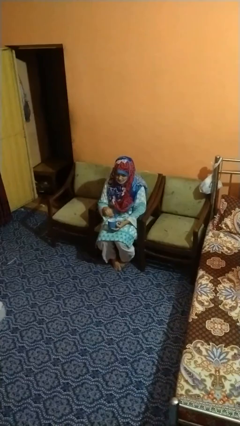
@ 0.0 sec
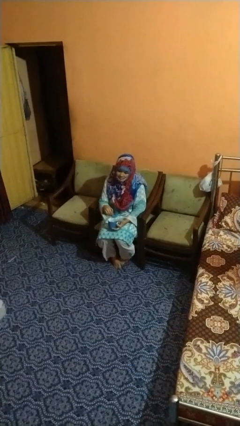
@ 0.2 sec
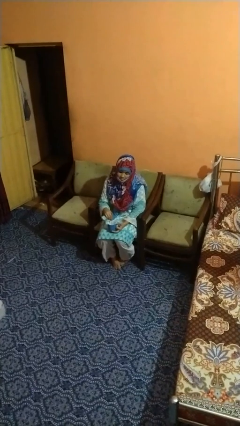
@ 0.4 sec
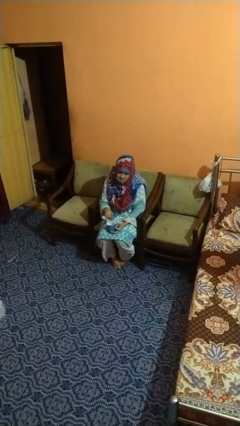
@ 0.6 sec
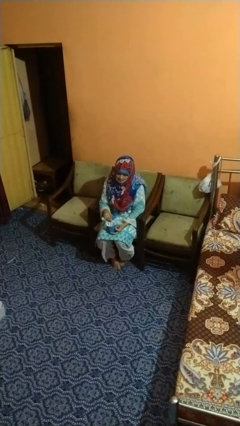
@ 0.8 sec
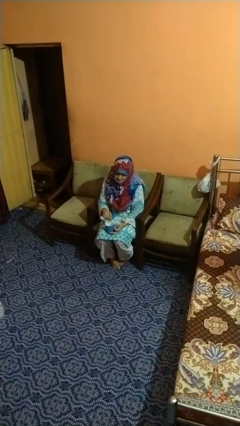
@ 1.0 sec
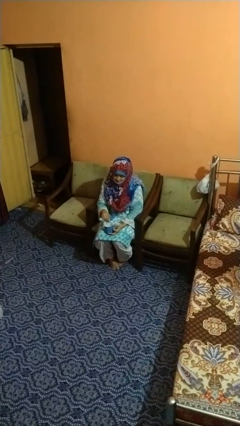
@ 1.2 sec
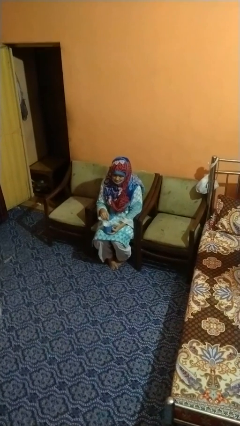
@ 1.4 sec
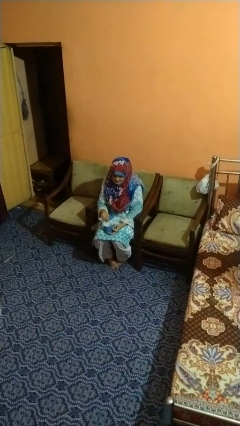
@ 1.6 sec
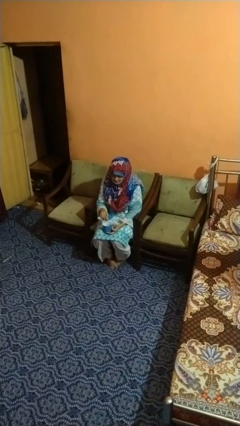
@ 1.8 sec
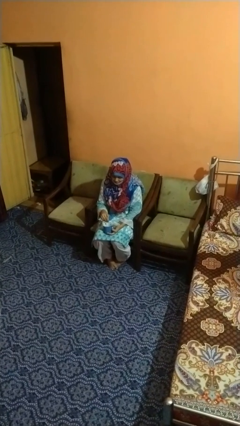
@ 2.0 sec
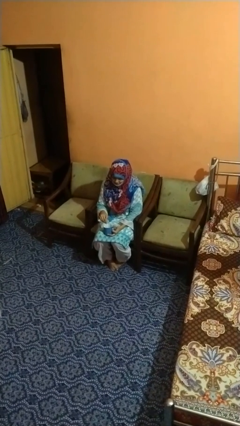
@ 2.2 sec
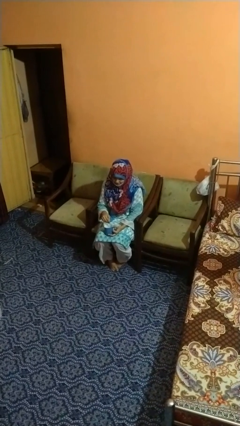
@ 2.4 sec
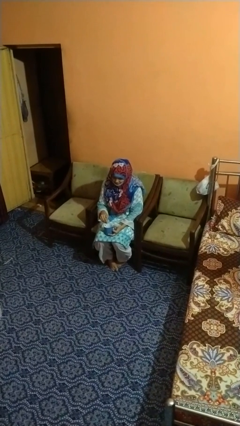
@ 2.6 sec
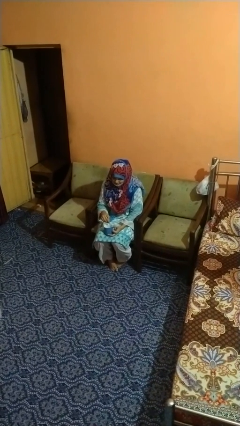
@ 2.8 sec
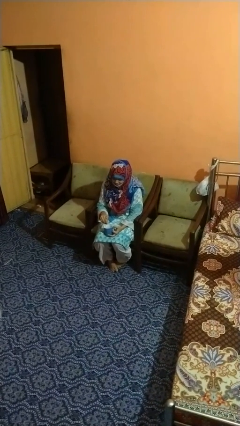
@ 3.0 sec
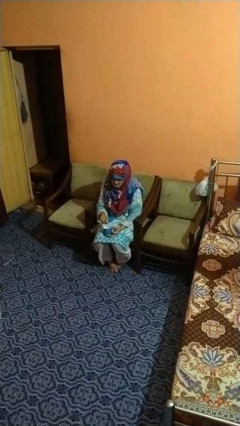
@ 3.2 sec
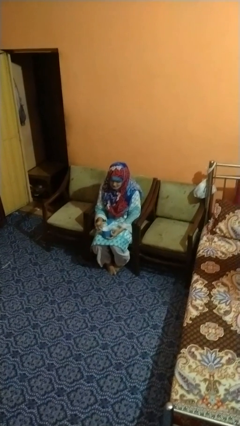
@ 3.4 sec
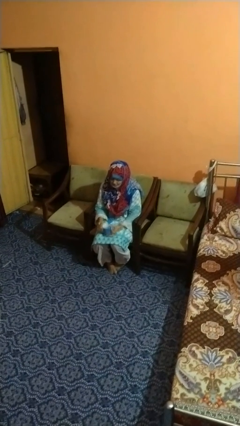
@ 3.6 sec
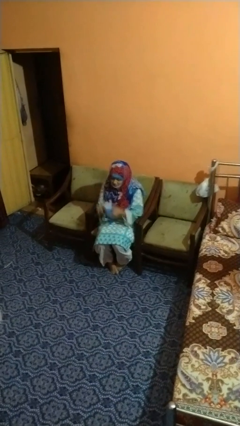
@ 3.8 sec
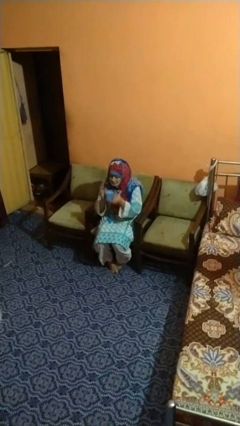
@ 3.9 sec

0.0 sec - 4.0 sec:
person stirs mug

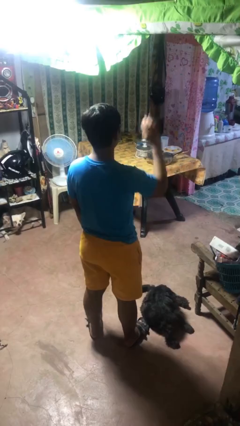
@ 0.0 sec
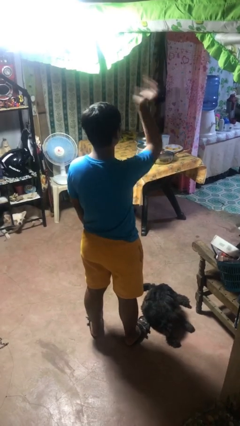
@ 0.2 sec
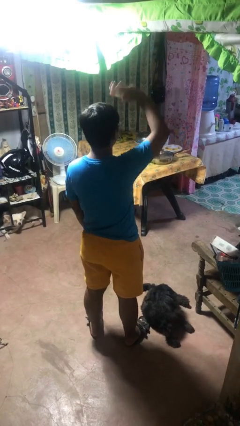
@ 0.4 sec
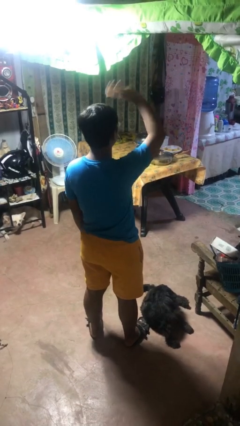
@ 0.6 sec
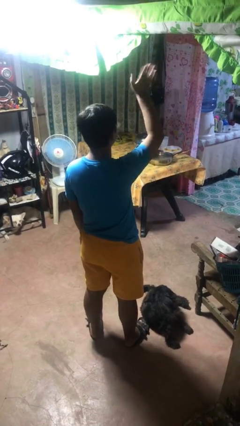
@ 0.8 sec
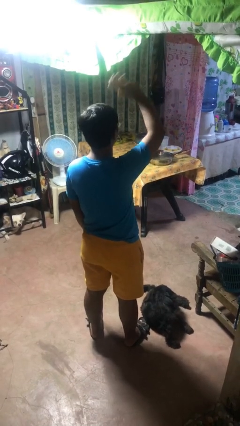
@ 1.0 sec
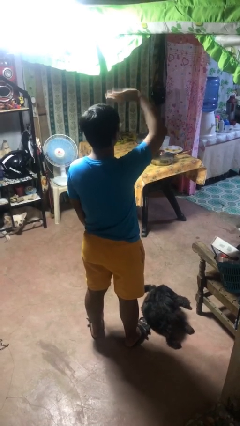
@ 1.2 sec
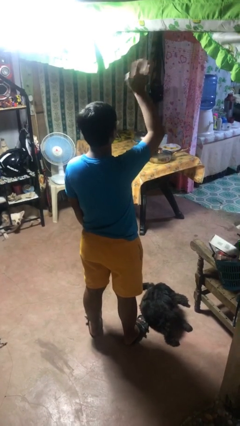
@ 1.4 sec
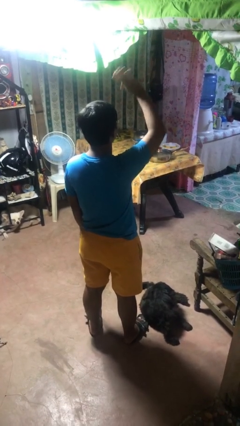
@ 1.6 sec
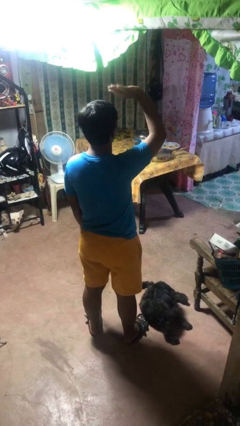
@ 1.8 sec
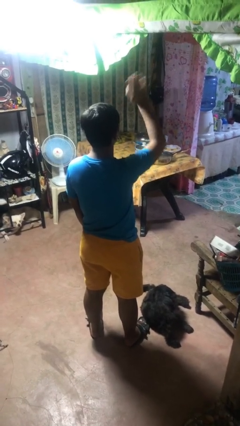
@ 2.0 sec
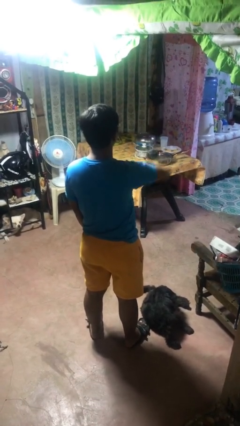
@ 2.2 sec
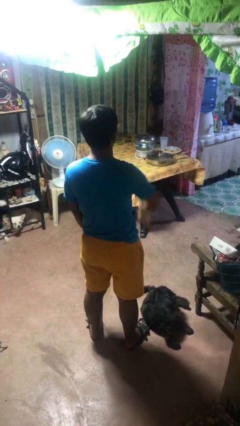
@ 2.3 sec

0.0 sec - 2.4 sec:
person waves at person

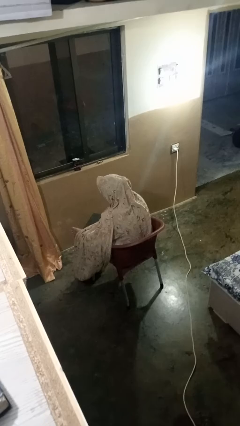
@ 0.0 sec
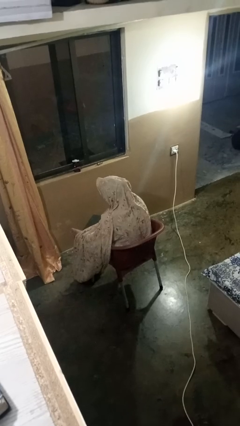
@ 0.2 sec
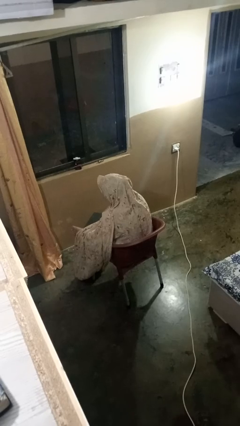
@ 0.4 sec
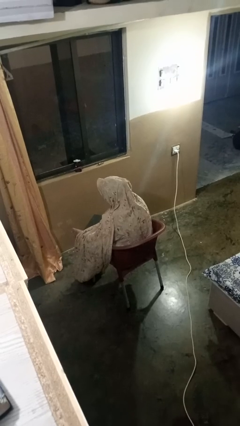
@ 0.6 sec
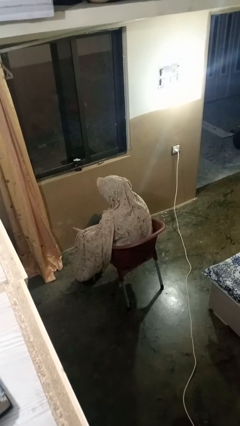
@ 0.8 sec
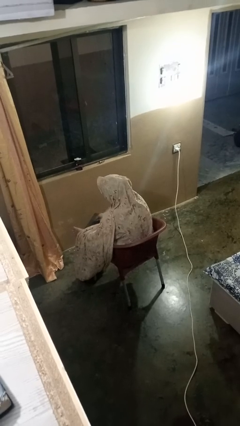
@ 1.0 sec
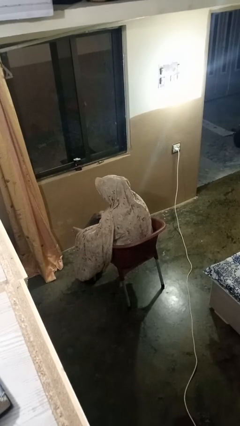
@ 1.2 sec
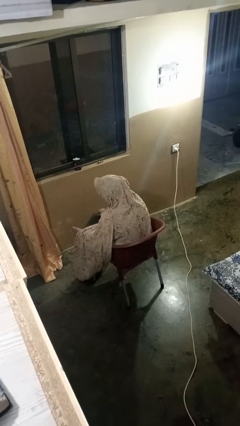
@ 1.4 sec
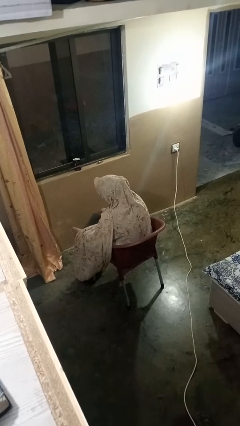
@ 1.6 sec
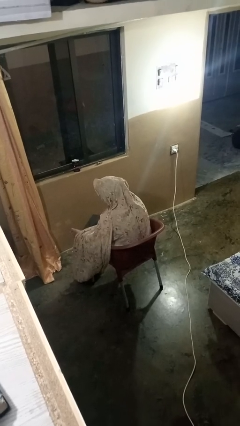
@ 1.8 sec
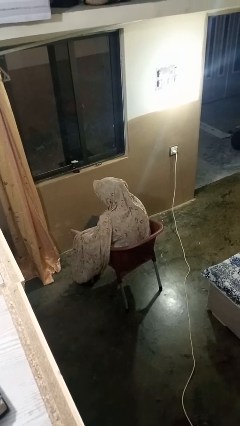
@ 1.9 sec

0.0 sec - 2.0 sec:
person interacts with tablet

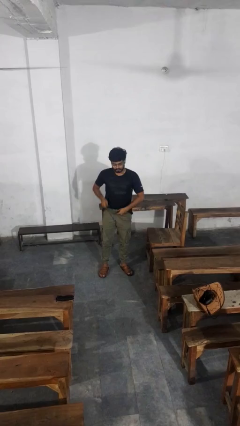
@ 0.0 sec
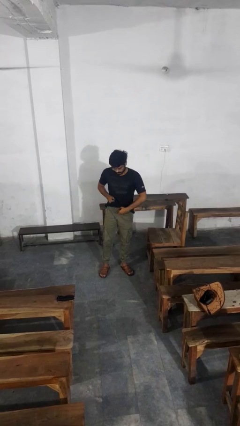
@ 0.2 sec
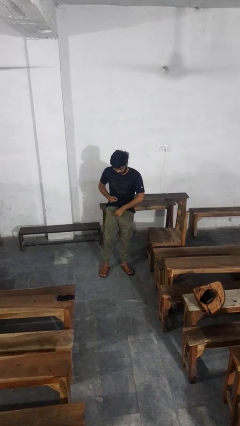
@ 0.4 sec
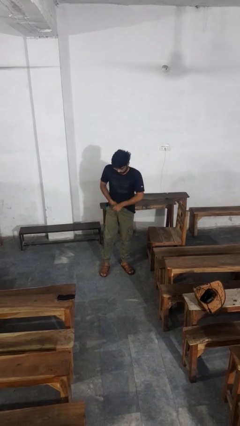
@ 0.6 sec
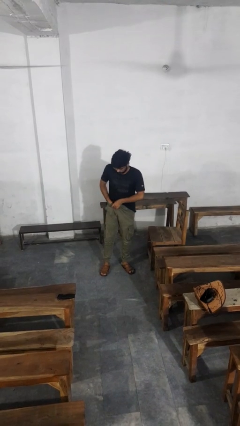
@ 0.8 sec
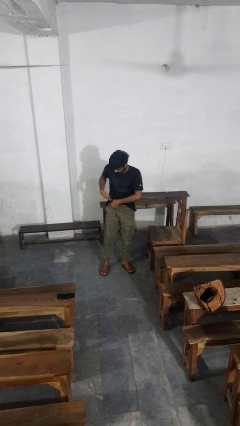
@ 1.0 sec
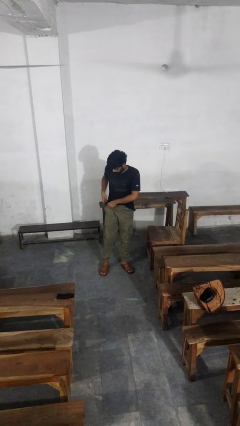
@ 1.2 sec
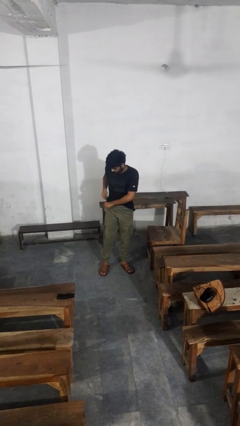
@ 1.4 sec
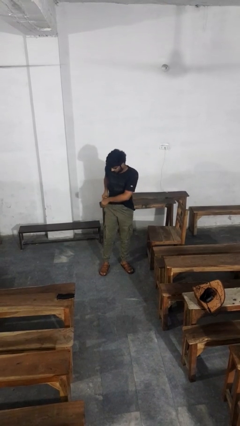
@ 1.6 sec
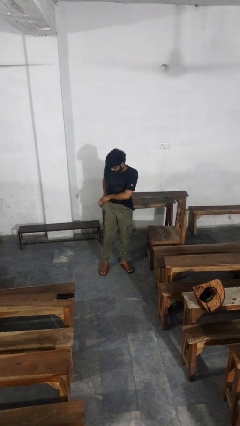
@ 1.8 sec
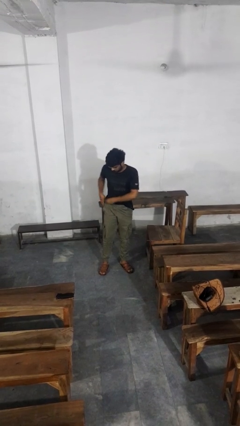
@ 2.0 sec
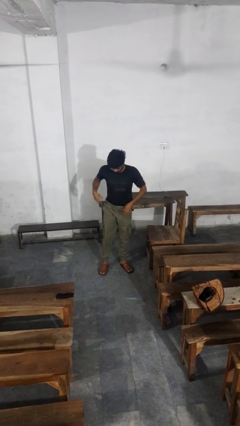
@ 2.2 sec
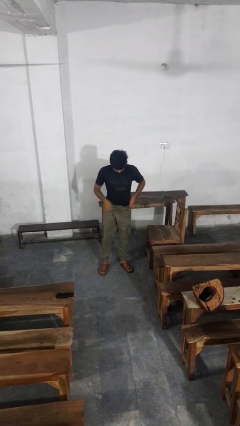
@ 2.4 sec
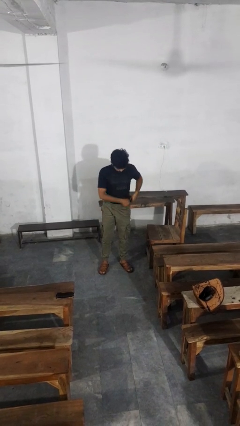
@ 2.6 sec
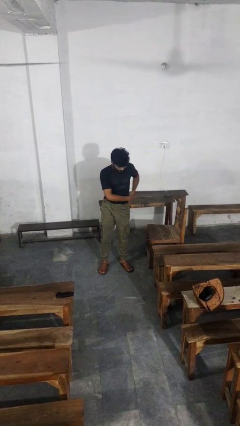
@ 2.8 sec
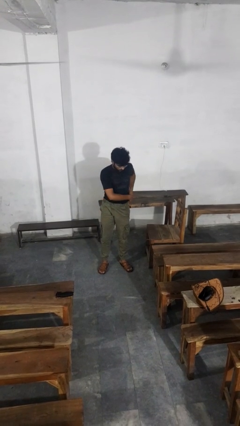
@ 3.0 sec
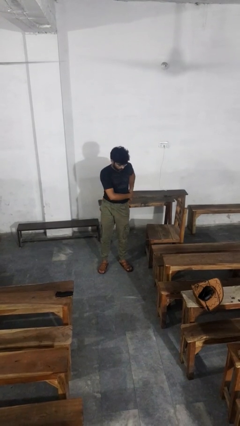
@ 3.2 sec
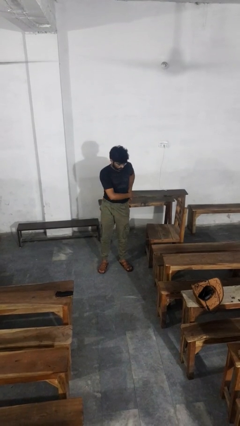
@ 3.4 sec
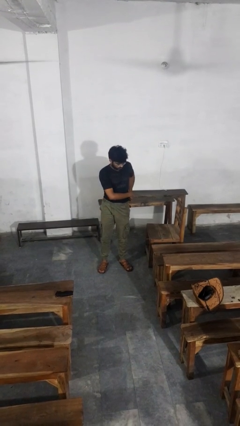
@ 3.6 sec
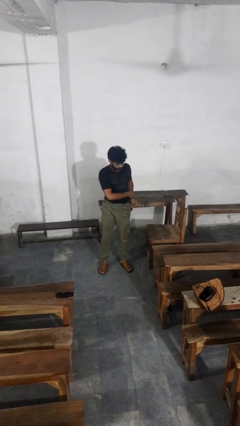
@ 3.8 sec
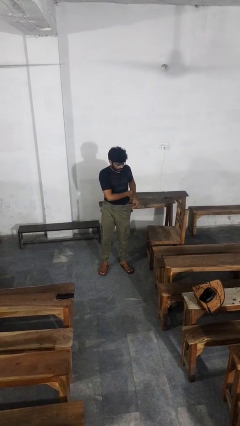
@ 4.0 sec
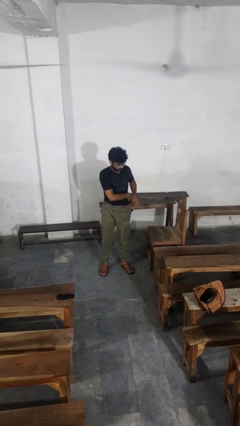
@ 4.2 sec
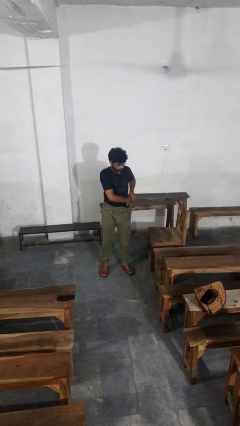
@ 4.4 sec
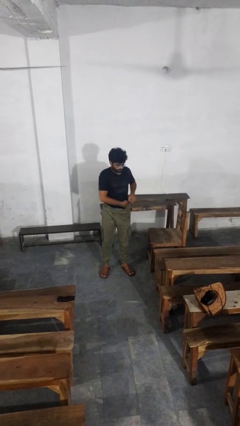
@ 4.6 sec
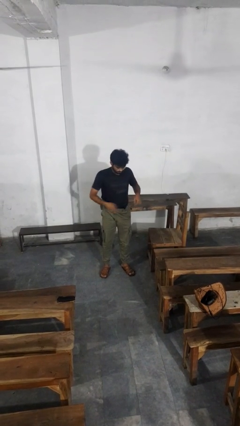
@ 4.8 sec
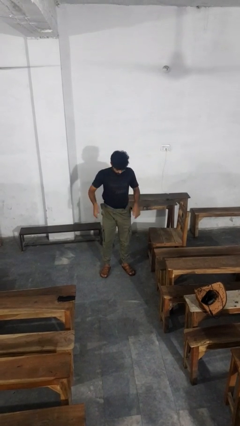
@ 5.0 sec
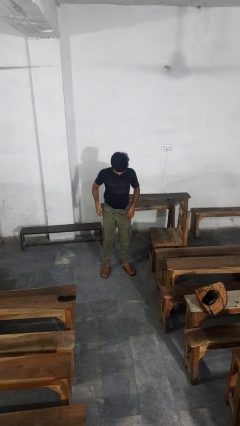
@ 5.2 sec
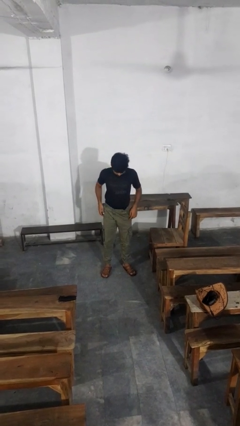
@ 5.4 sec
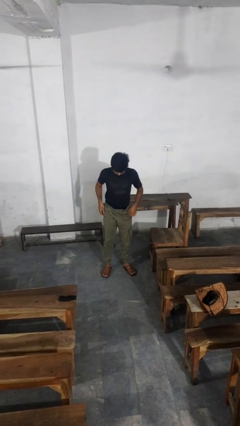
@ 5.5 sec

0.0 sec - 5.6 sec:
person tucks in shirt

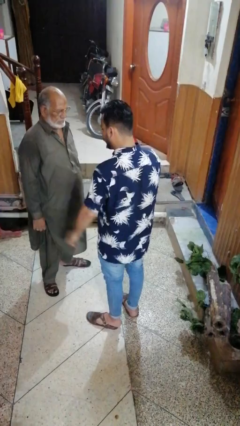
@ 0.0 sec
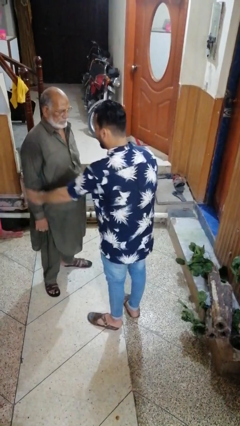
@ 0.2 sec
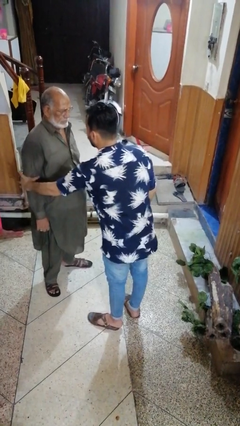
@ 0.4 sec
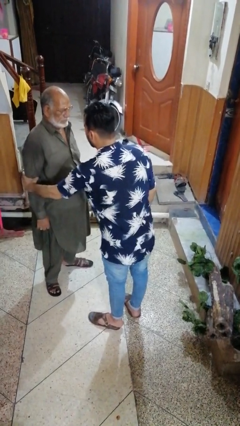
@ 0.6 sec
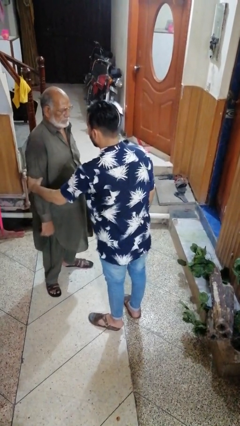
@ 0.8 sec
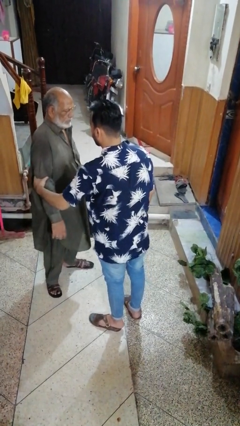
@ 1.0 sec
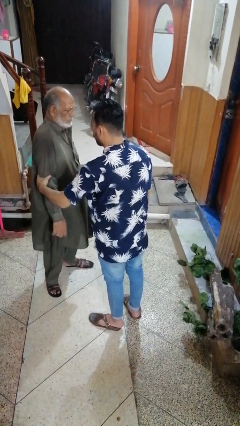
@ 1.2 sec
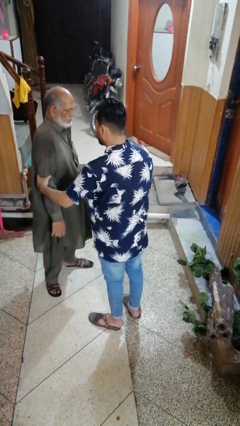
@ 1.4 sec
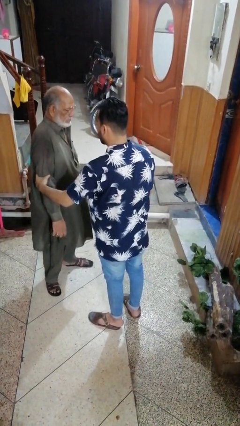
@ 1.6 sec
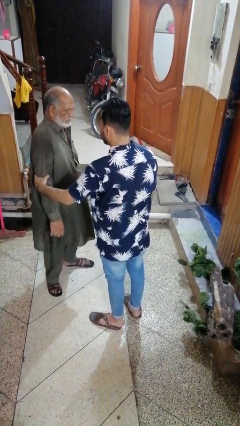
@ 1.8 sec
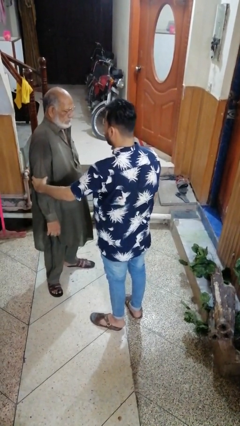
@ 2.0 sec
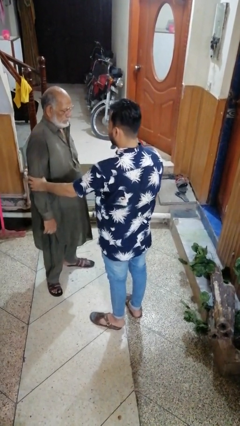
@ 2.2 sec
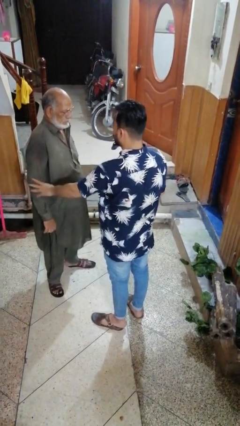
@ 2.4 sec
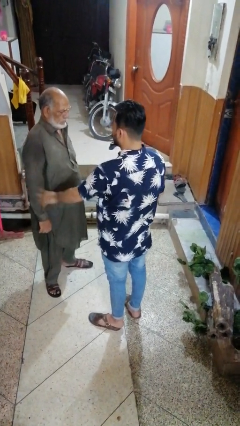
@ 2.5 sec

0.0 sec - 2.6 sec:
person grabs person by forearm

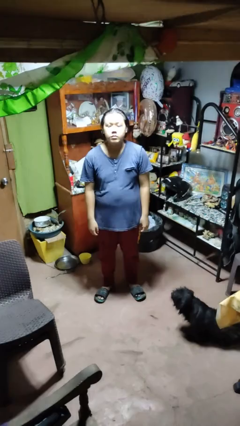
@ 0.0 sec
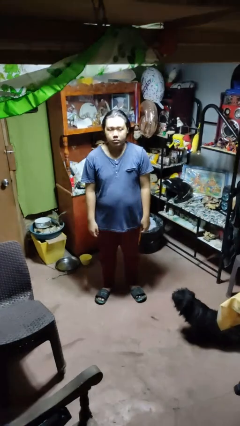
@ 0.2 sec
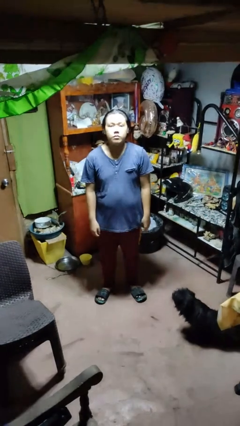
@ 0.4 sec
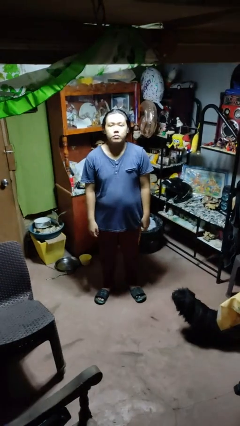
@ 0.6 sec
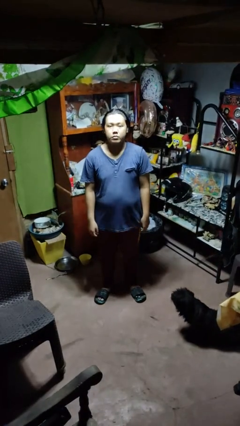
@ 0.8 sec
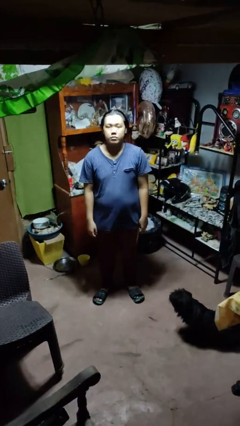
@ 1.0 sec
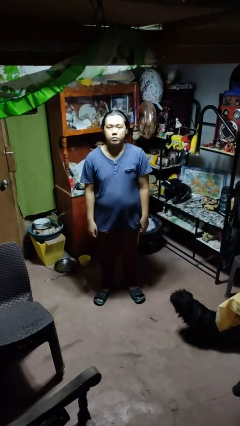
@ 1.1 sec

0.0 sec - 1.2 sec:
person nods head
